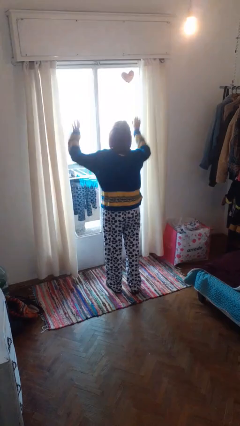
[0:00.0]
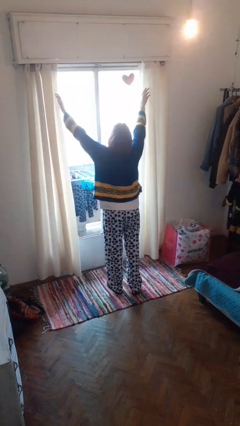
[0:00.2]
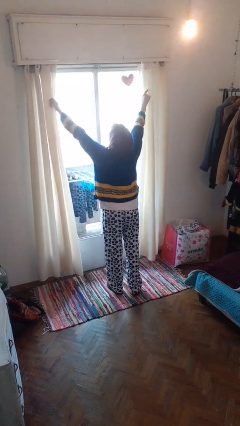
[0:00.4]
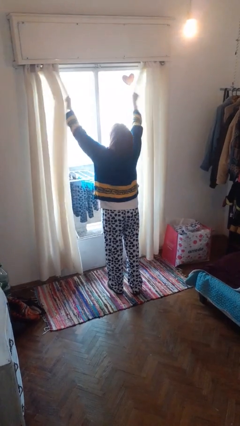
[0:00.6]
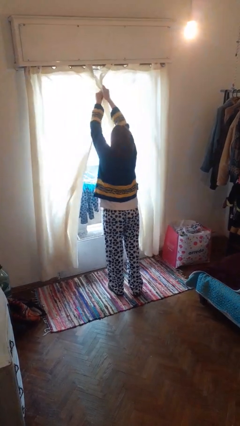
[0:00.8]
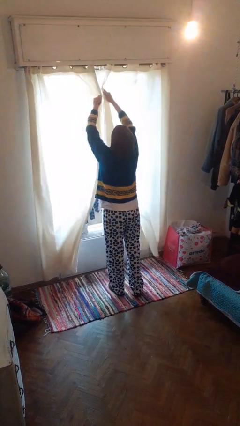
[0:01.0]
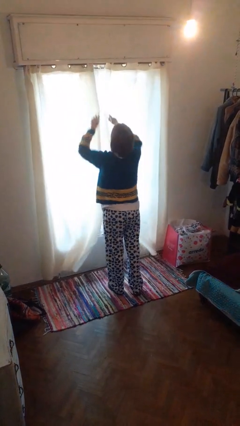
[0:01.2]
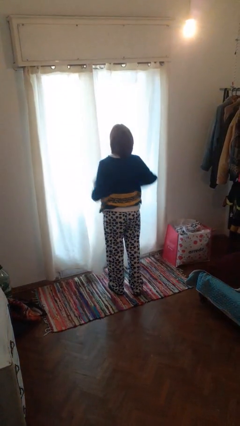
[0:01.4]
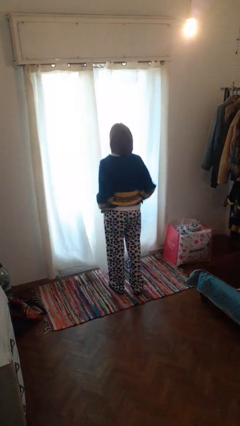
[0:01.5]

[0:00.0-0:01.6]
person closes curtains

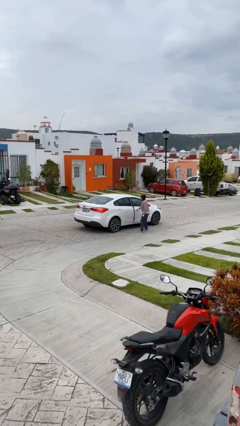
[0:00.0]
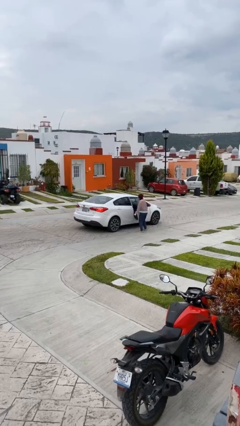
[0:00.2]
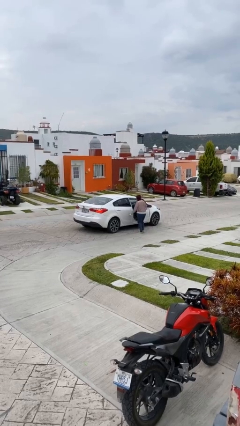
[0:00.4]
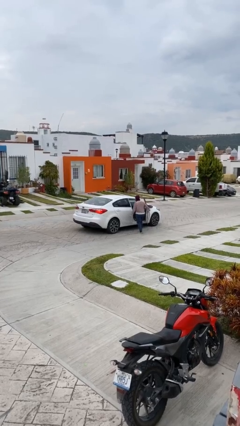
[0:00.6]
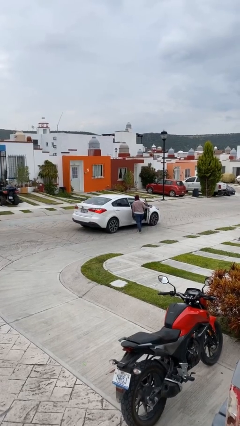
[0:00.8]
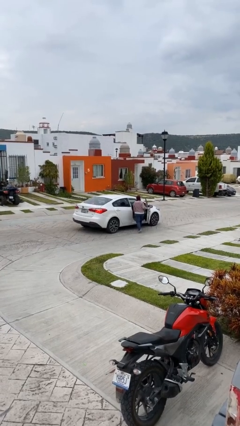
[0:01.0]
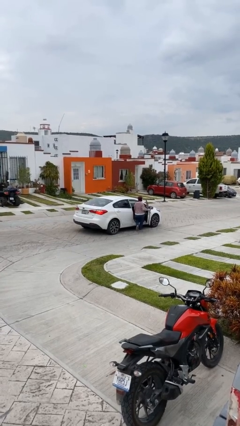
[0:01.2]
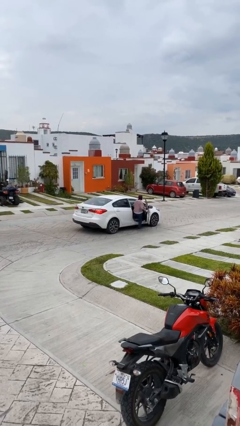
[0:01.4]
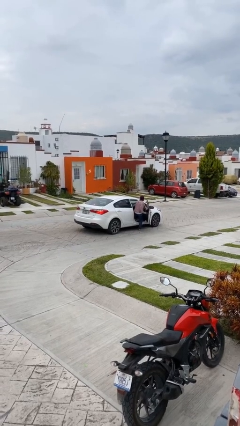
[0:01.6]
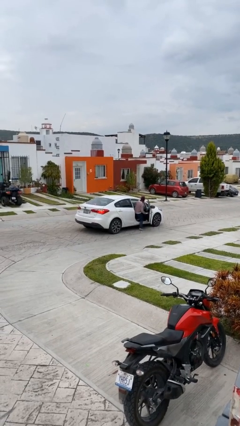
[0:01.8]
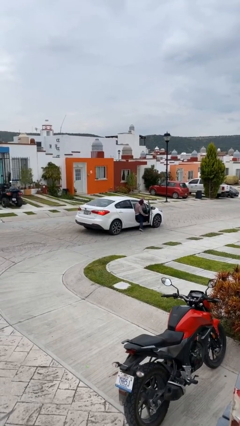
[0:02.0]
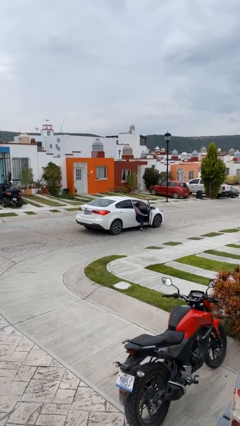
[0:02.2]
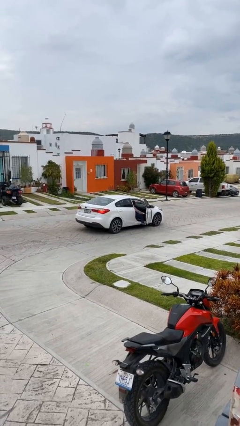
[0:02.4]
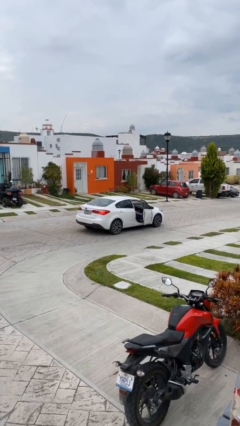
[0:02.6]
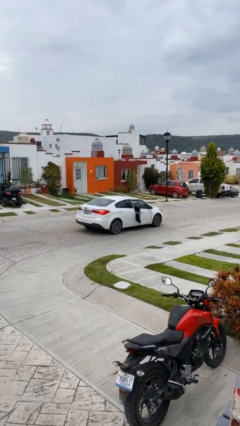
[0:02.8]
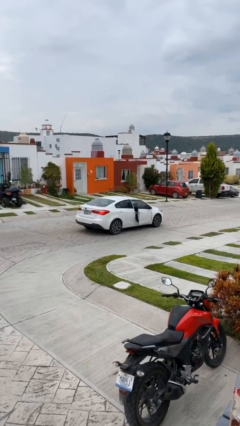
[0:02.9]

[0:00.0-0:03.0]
car picks up person

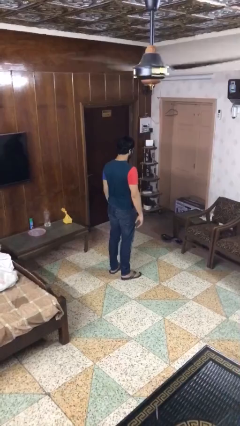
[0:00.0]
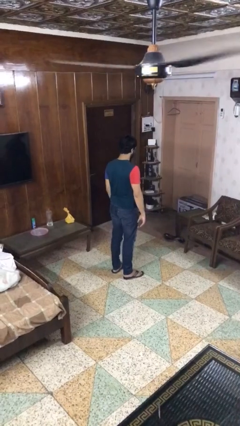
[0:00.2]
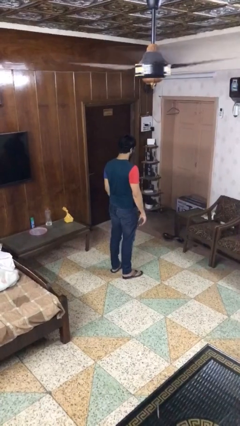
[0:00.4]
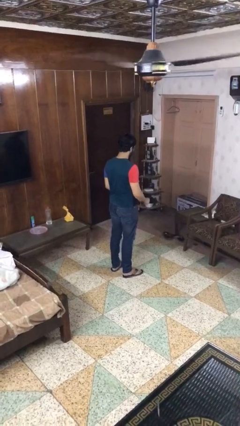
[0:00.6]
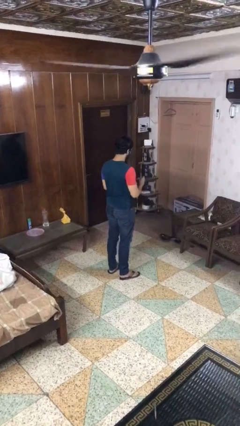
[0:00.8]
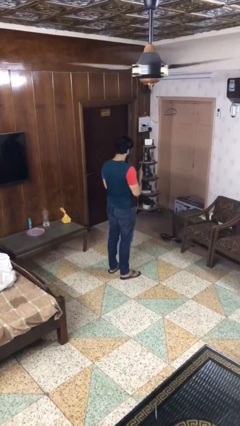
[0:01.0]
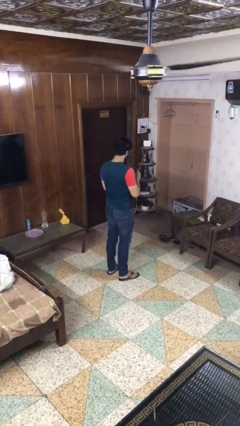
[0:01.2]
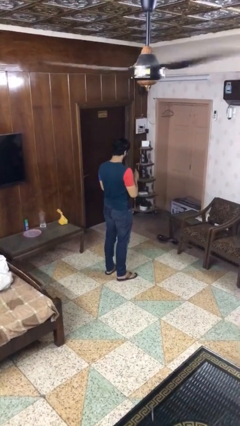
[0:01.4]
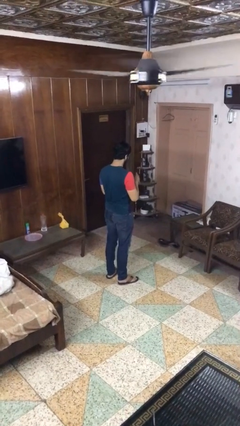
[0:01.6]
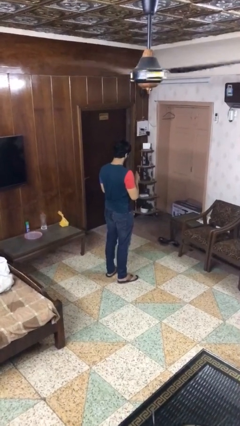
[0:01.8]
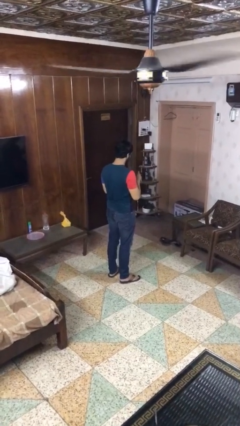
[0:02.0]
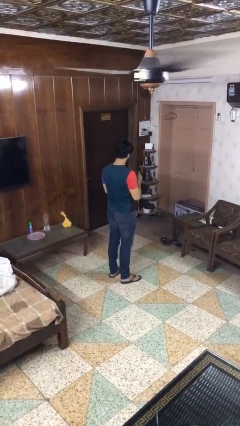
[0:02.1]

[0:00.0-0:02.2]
person clips fingernails

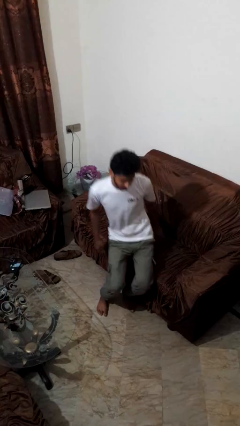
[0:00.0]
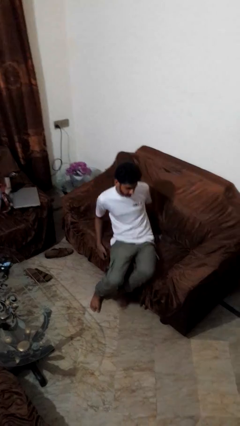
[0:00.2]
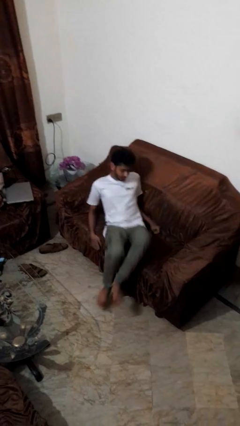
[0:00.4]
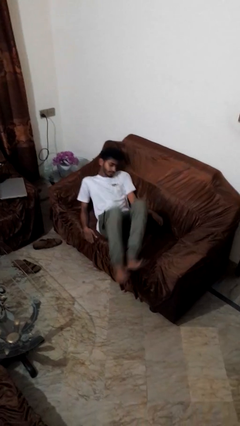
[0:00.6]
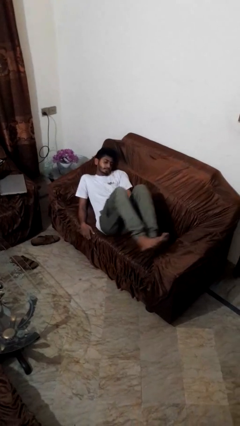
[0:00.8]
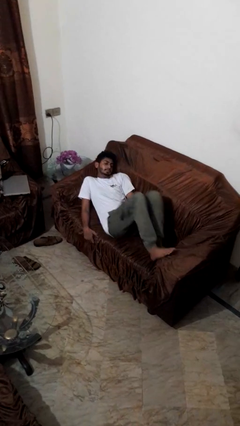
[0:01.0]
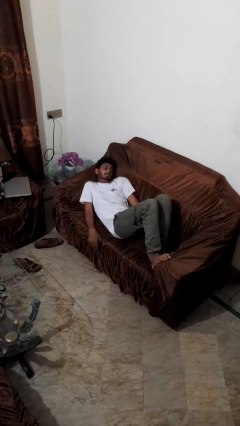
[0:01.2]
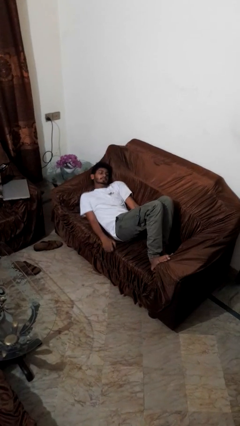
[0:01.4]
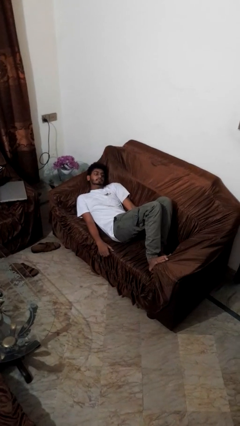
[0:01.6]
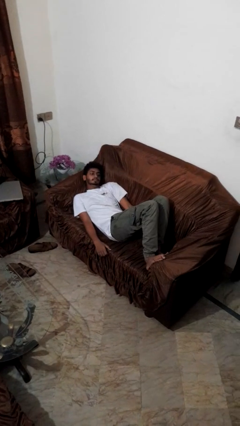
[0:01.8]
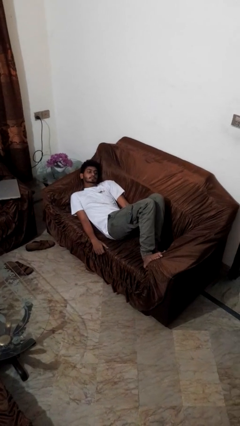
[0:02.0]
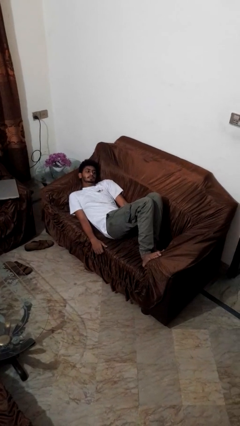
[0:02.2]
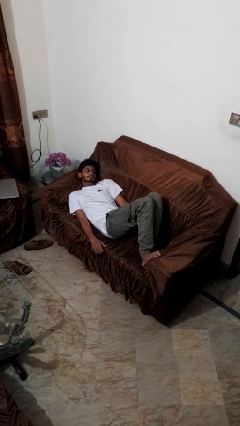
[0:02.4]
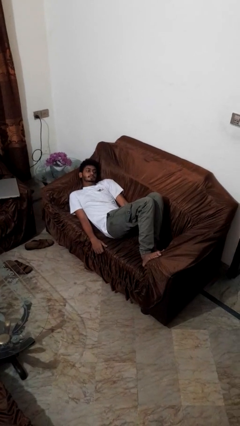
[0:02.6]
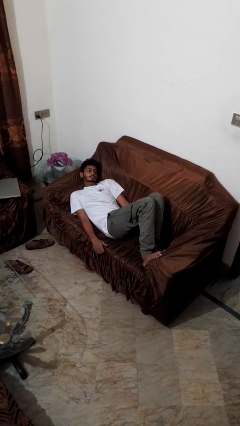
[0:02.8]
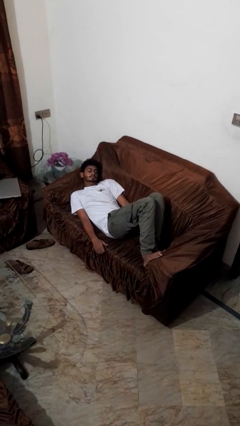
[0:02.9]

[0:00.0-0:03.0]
person lies down on couch

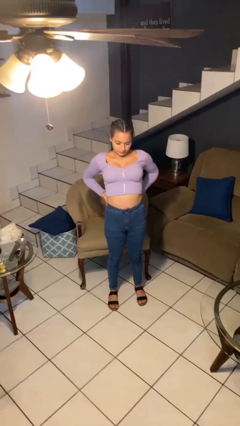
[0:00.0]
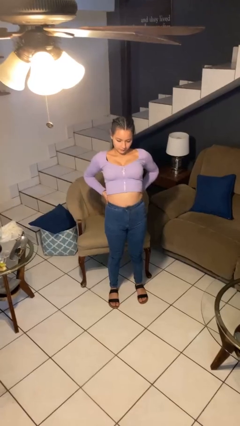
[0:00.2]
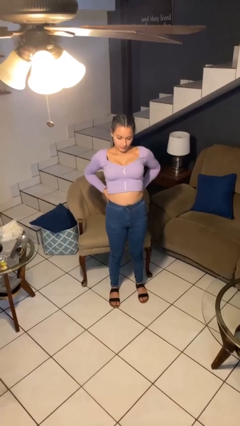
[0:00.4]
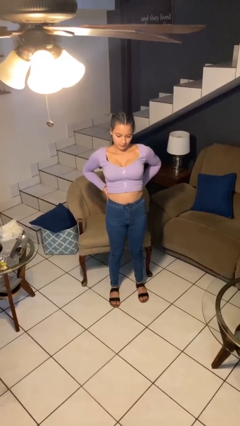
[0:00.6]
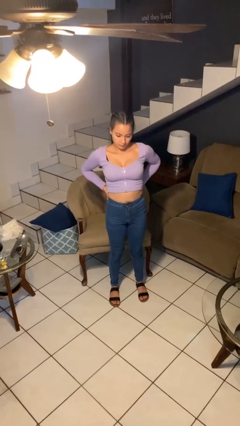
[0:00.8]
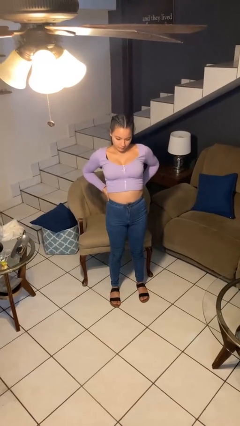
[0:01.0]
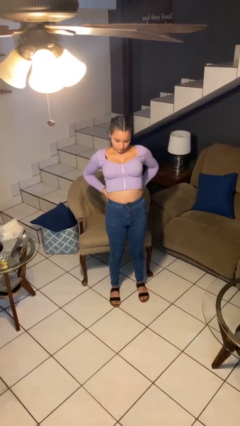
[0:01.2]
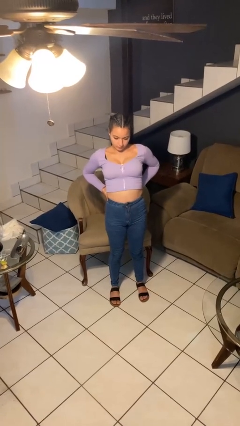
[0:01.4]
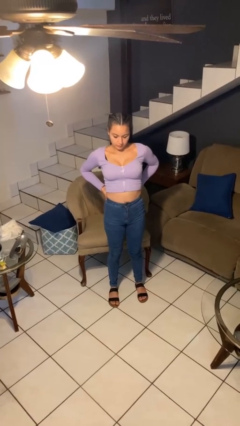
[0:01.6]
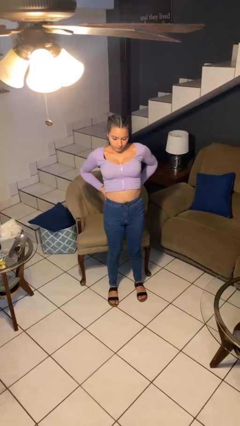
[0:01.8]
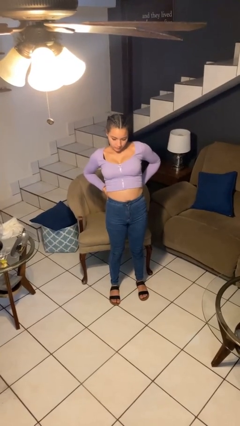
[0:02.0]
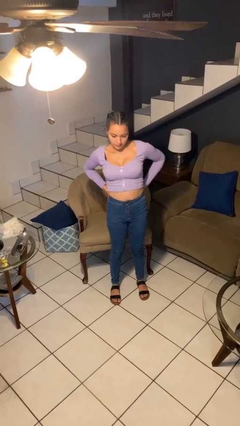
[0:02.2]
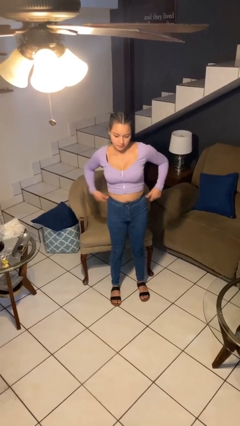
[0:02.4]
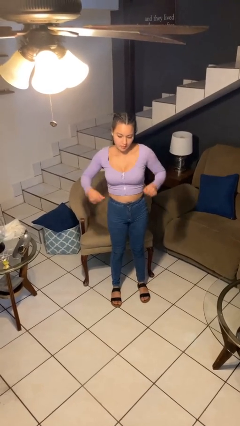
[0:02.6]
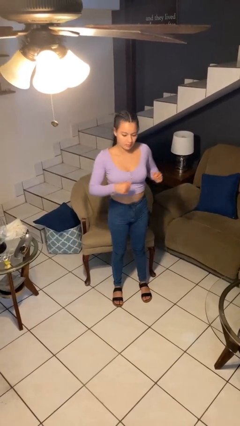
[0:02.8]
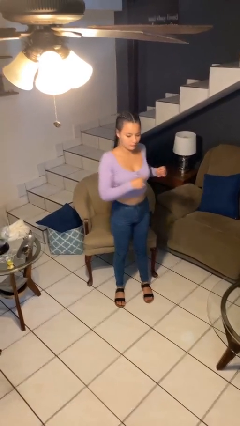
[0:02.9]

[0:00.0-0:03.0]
person stretches back

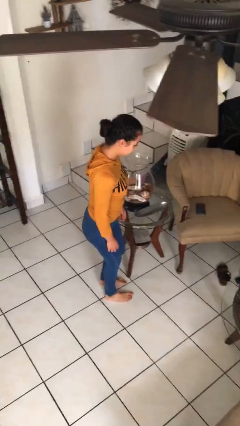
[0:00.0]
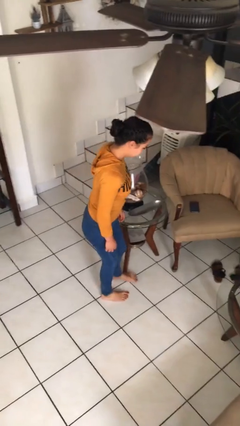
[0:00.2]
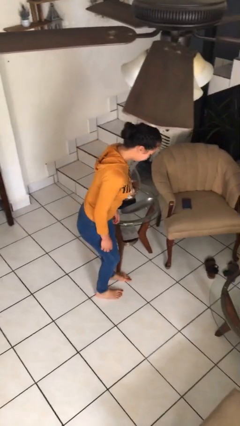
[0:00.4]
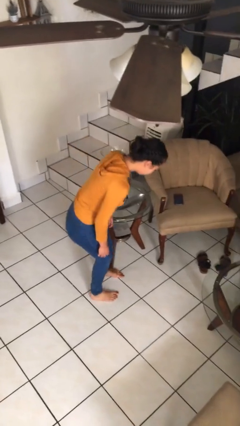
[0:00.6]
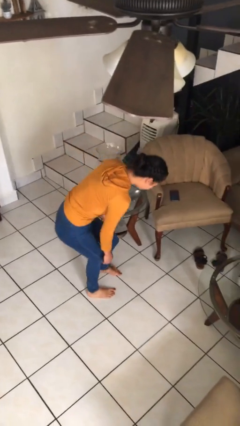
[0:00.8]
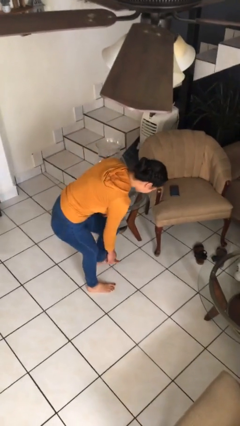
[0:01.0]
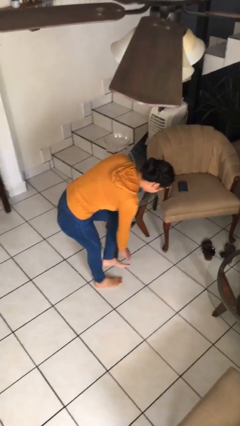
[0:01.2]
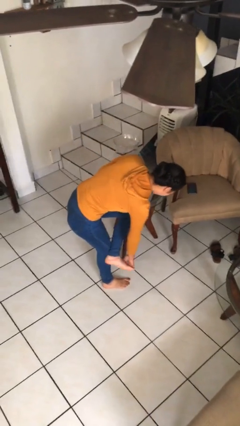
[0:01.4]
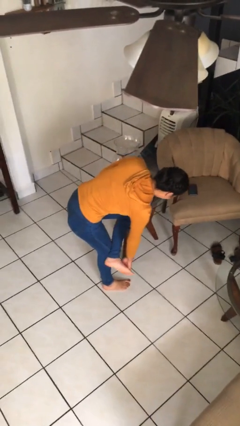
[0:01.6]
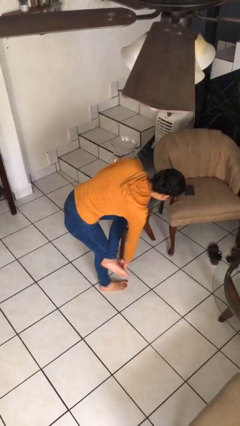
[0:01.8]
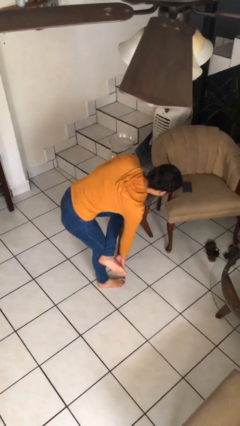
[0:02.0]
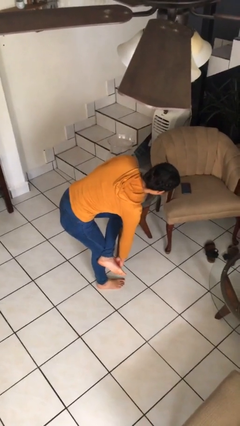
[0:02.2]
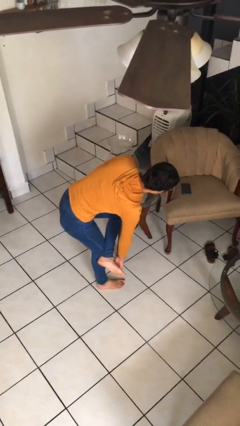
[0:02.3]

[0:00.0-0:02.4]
person stubs toe

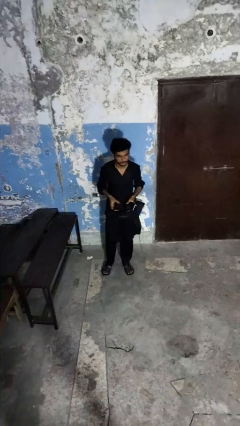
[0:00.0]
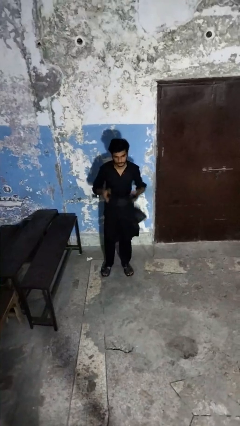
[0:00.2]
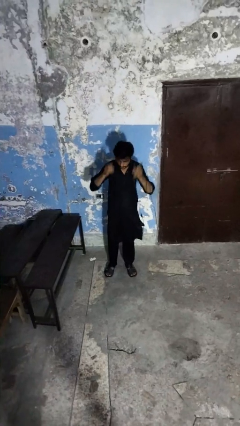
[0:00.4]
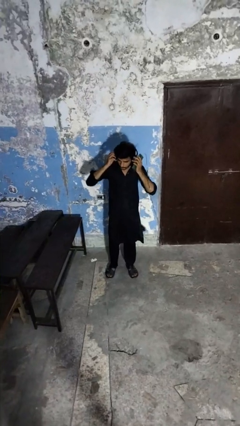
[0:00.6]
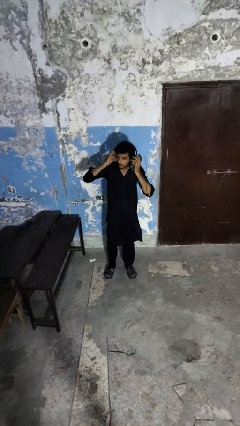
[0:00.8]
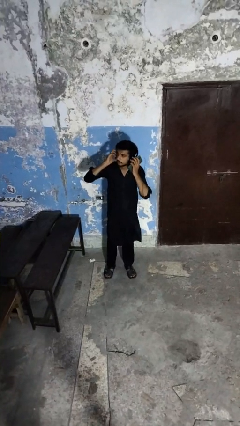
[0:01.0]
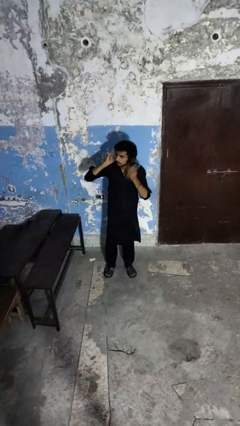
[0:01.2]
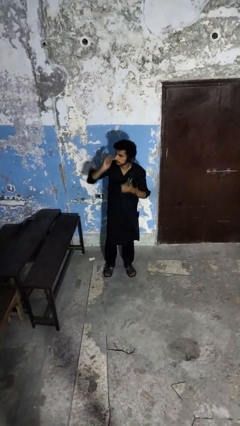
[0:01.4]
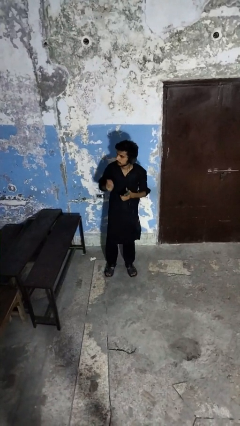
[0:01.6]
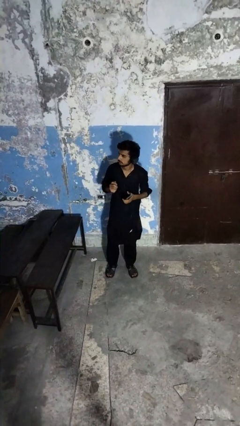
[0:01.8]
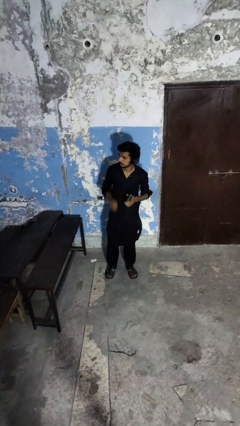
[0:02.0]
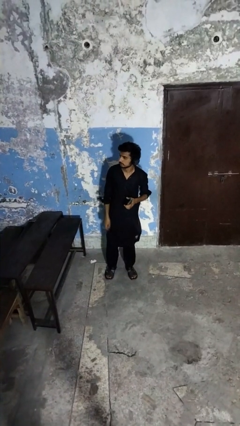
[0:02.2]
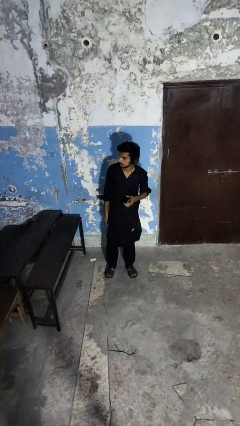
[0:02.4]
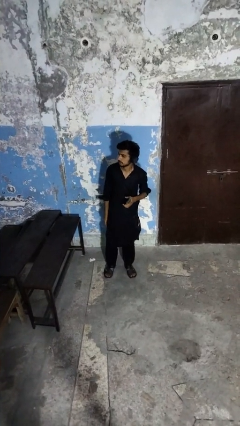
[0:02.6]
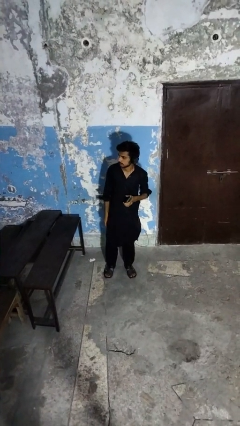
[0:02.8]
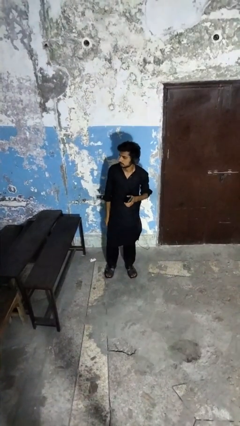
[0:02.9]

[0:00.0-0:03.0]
person puts on headphones
